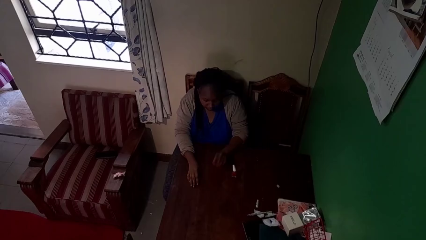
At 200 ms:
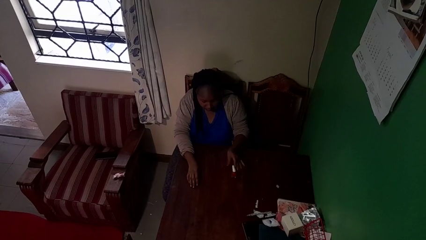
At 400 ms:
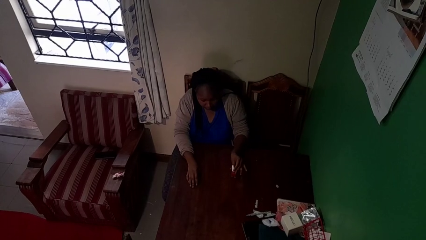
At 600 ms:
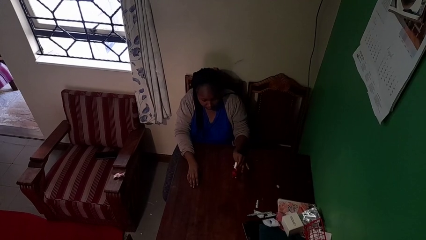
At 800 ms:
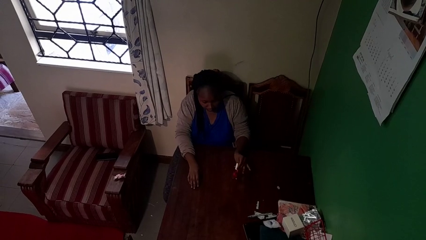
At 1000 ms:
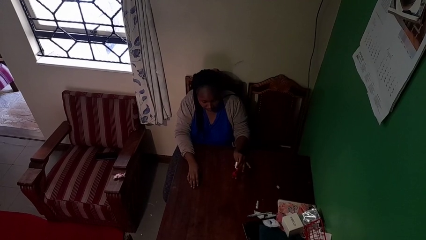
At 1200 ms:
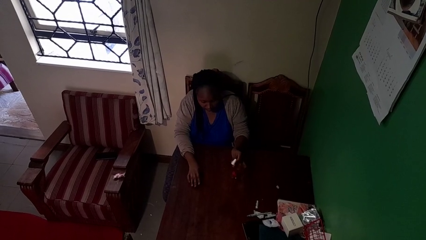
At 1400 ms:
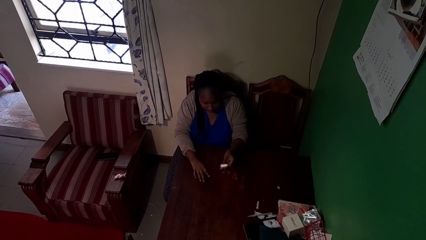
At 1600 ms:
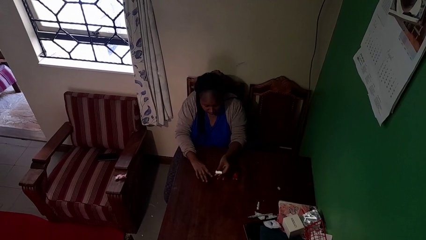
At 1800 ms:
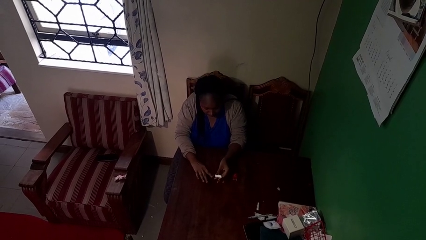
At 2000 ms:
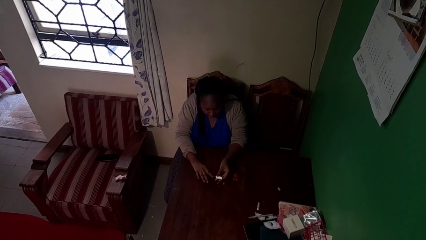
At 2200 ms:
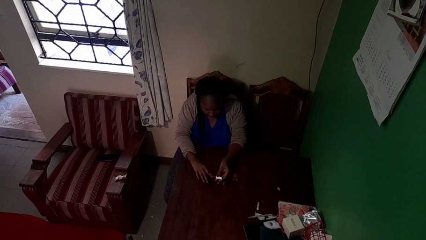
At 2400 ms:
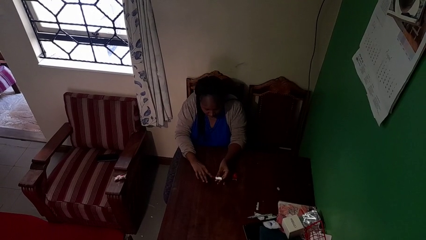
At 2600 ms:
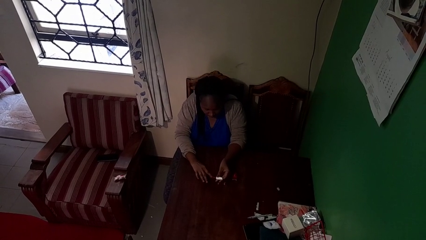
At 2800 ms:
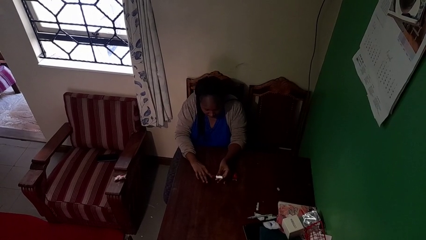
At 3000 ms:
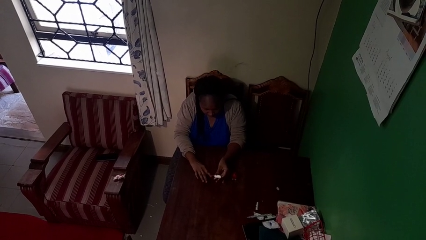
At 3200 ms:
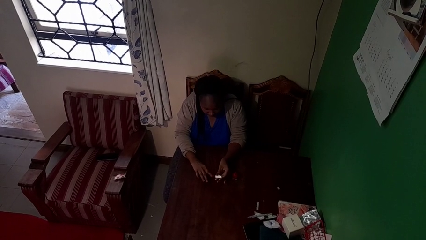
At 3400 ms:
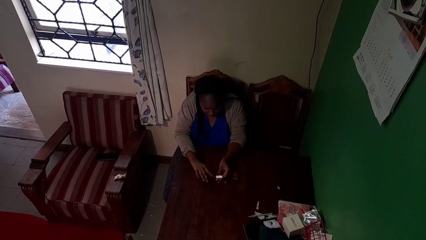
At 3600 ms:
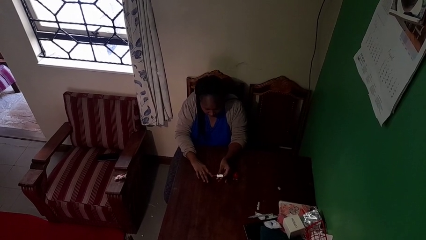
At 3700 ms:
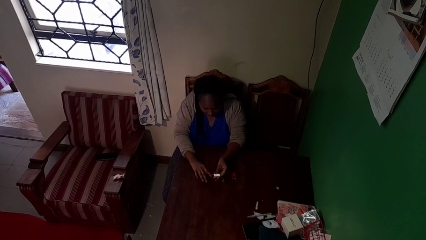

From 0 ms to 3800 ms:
person paints fingernails

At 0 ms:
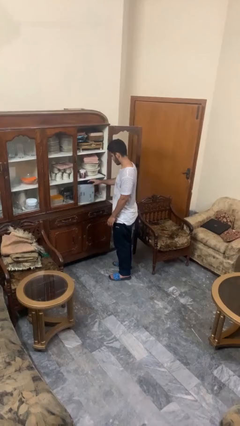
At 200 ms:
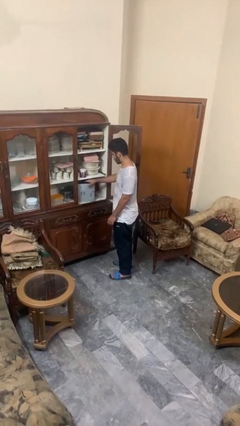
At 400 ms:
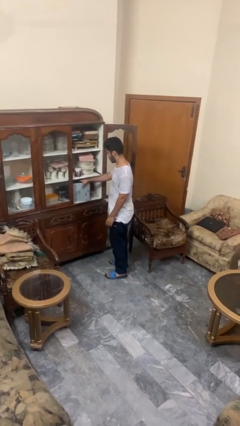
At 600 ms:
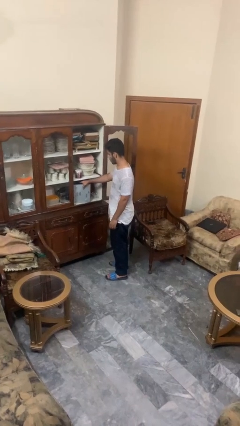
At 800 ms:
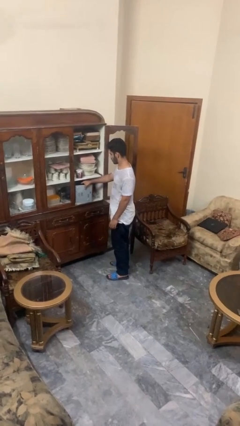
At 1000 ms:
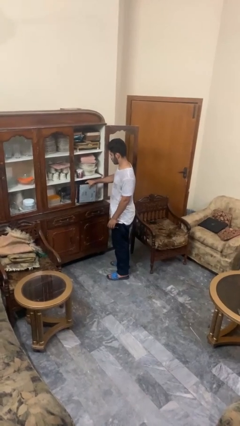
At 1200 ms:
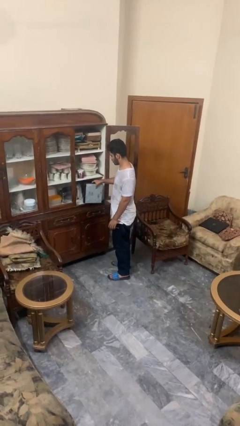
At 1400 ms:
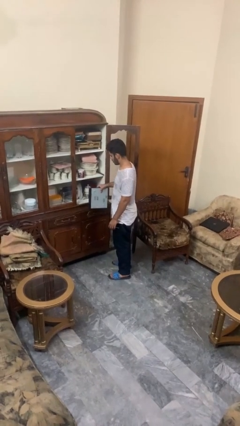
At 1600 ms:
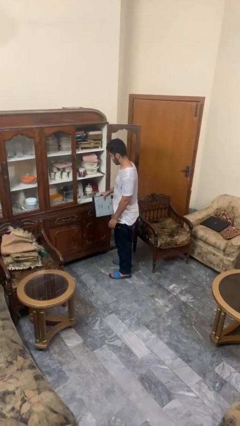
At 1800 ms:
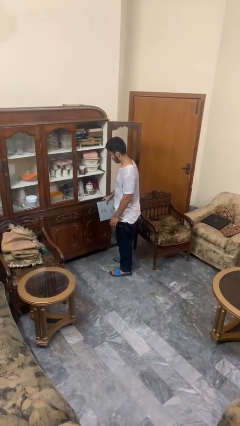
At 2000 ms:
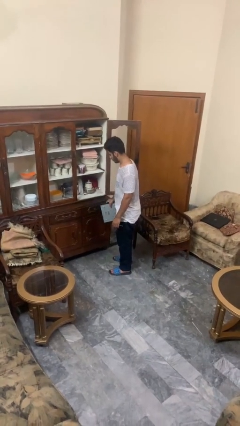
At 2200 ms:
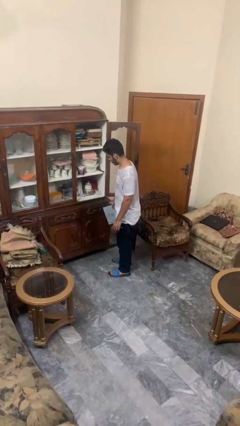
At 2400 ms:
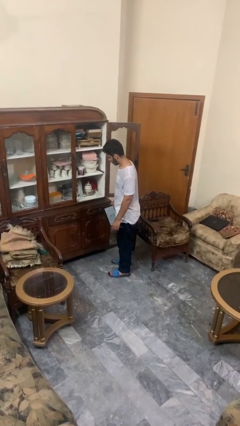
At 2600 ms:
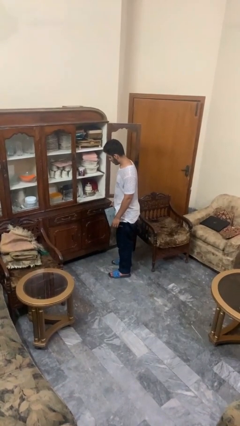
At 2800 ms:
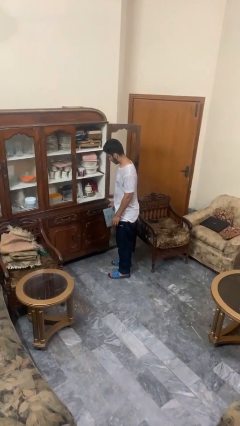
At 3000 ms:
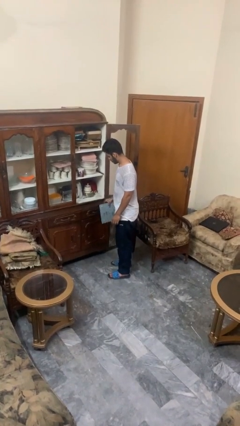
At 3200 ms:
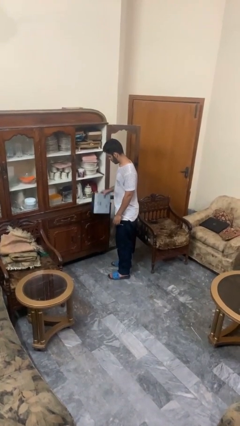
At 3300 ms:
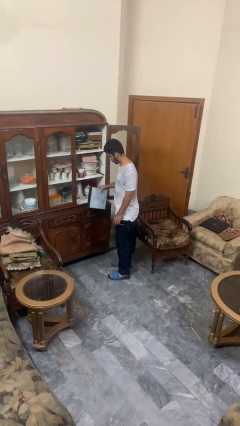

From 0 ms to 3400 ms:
person picks up object from cabinet

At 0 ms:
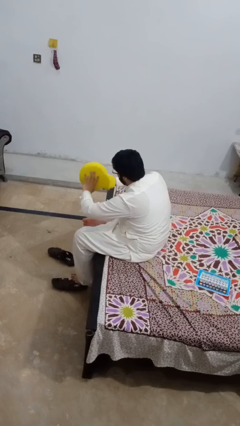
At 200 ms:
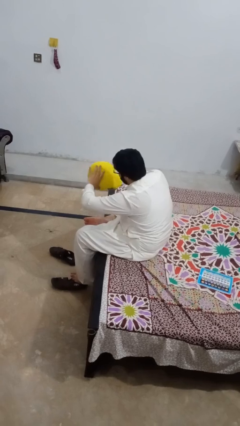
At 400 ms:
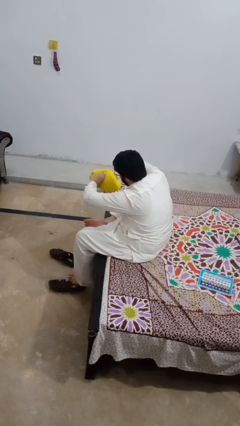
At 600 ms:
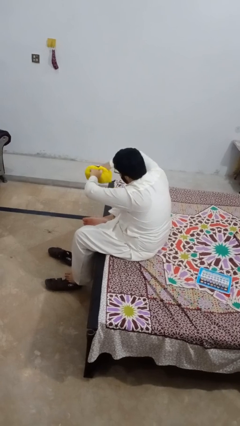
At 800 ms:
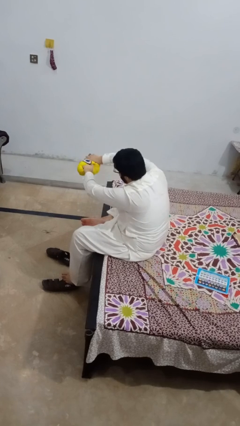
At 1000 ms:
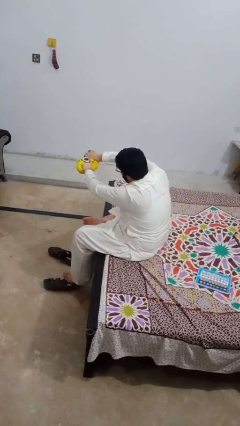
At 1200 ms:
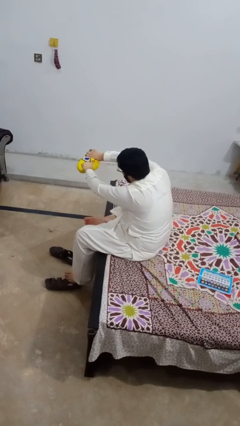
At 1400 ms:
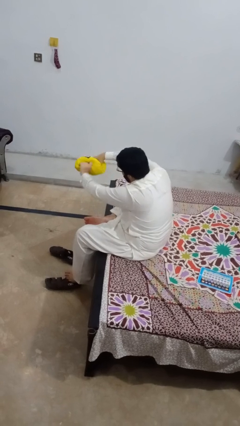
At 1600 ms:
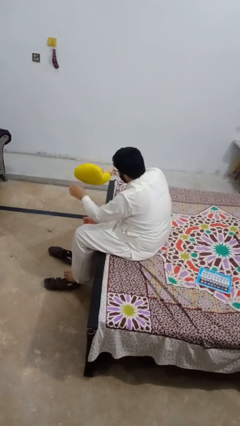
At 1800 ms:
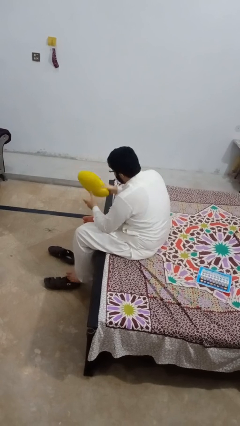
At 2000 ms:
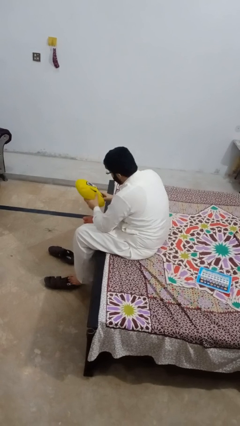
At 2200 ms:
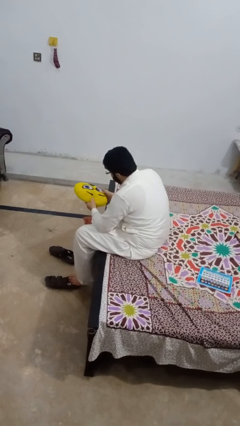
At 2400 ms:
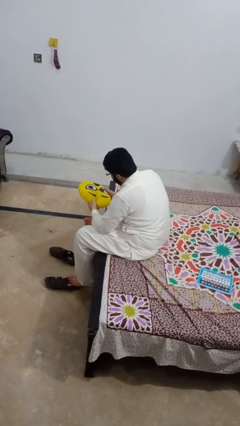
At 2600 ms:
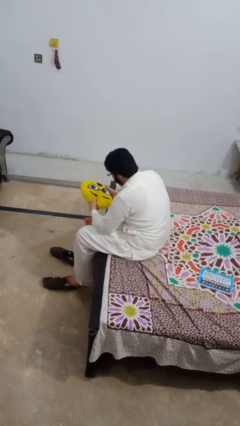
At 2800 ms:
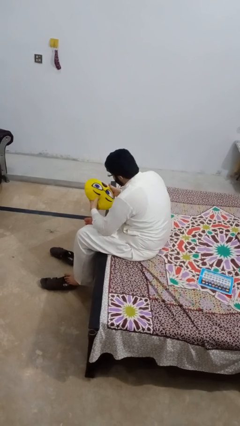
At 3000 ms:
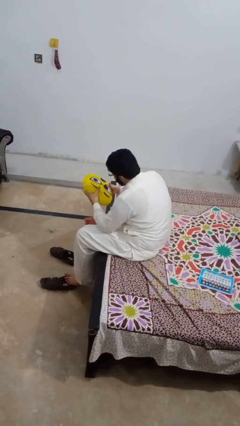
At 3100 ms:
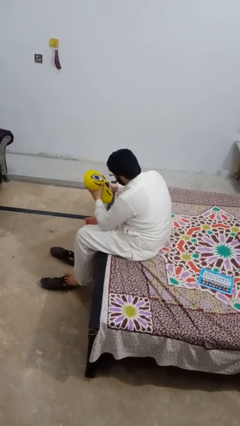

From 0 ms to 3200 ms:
person squeezes object

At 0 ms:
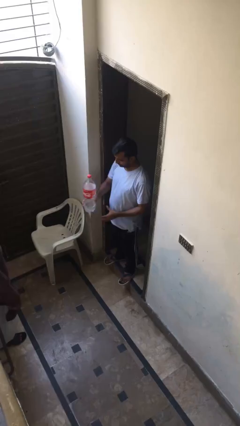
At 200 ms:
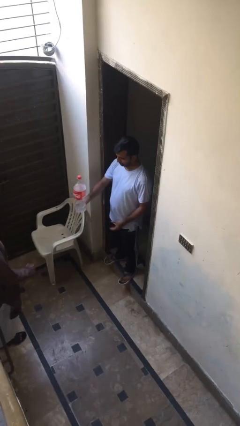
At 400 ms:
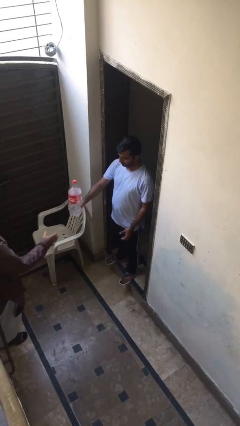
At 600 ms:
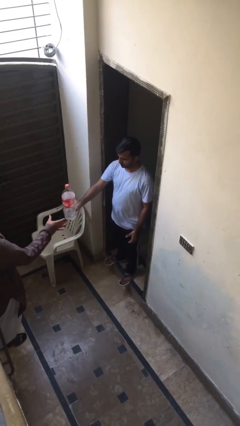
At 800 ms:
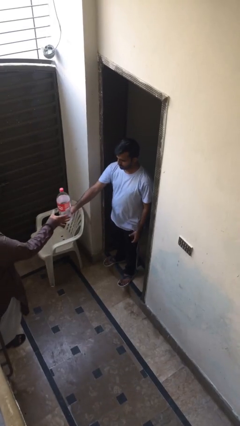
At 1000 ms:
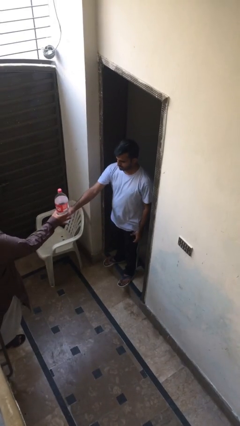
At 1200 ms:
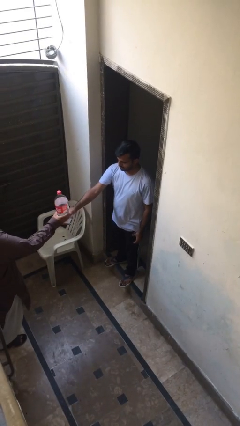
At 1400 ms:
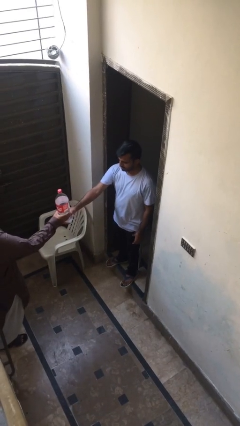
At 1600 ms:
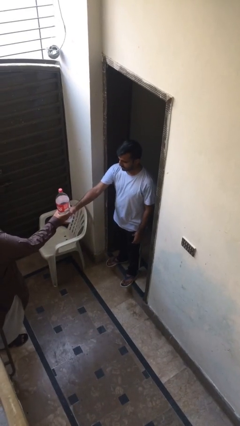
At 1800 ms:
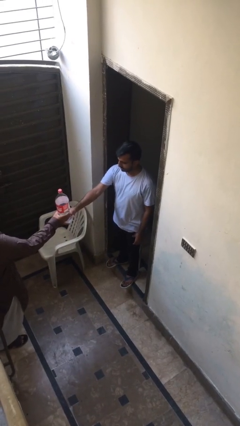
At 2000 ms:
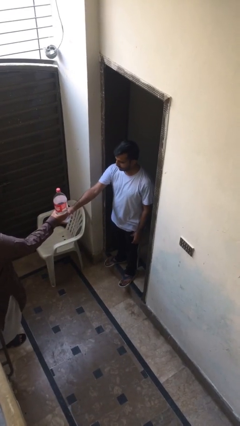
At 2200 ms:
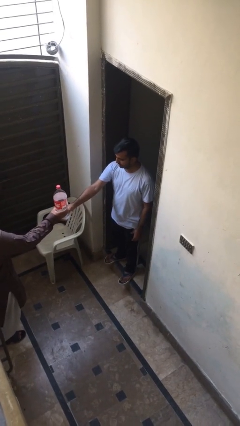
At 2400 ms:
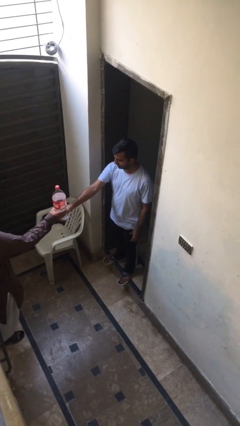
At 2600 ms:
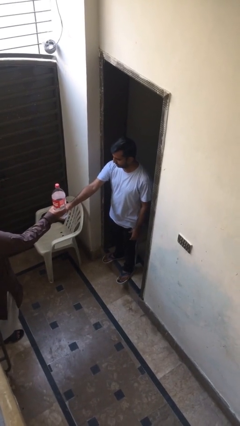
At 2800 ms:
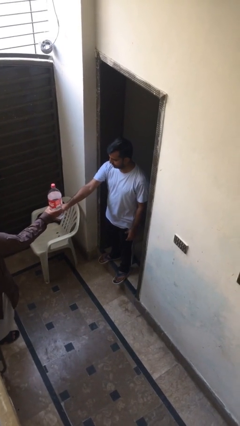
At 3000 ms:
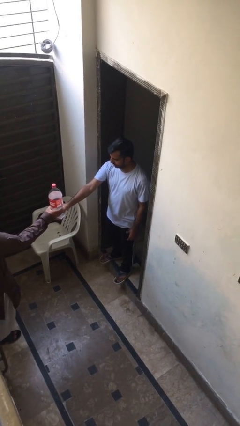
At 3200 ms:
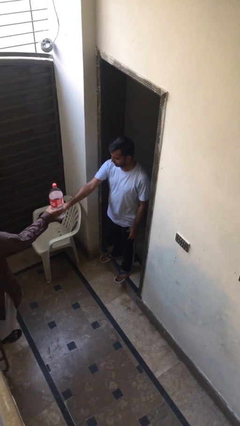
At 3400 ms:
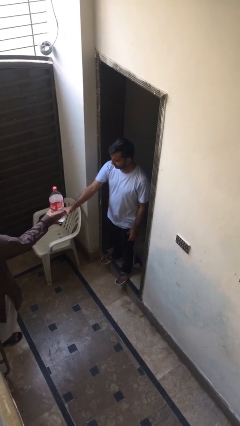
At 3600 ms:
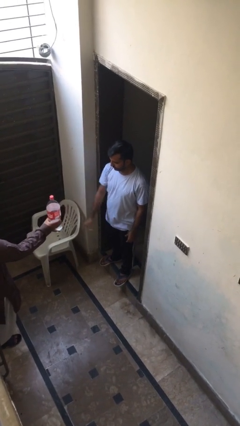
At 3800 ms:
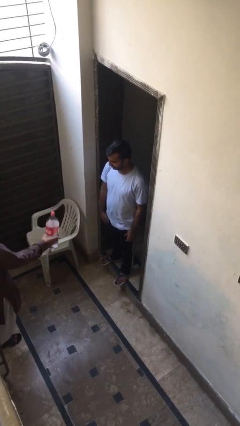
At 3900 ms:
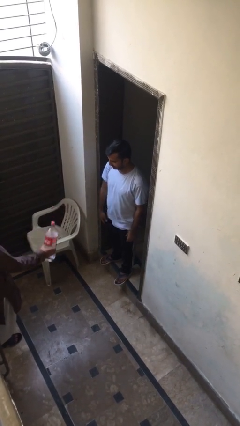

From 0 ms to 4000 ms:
person transfers object to person

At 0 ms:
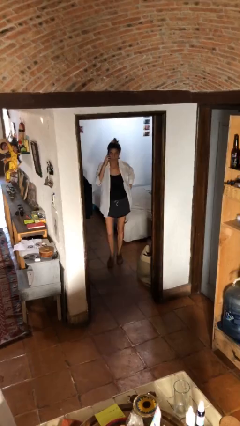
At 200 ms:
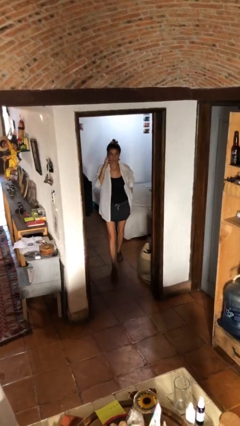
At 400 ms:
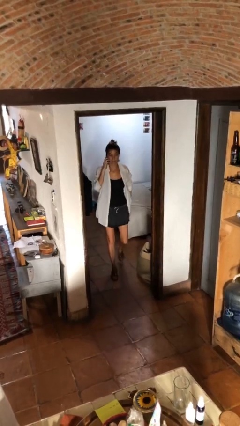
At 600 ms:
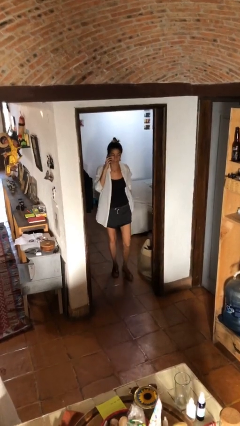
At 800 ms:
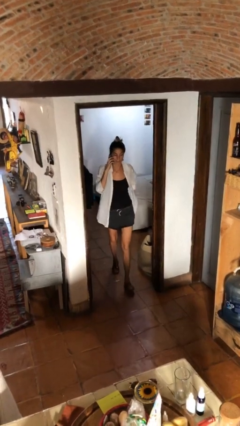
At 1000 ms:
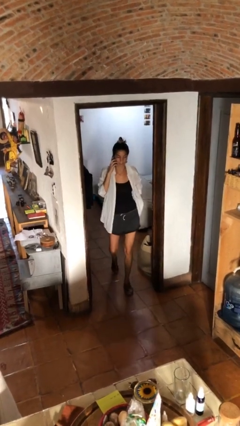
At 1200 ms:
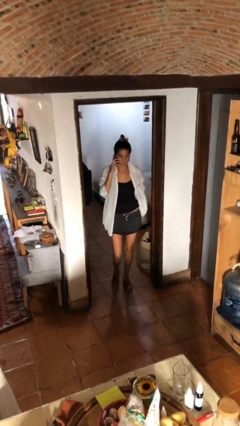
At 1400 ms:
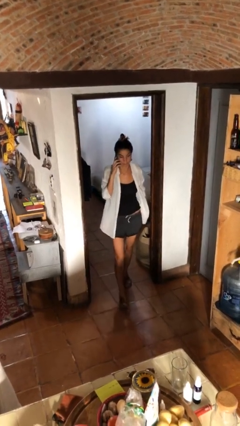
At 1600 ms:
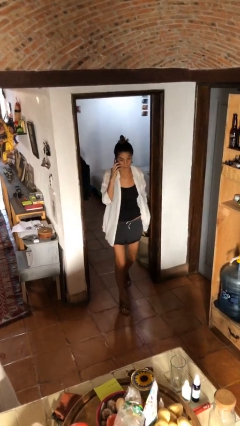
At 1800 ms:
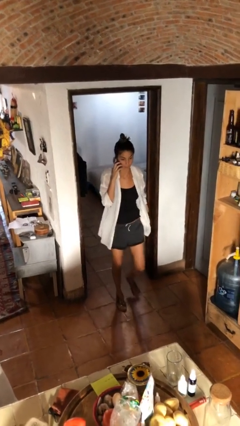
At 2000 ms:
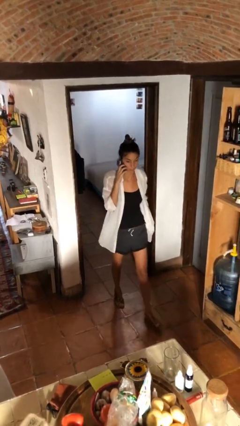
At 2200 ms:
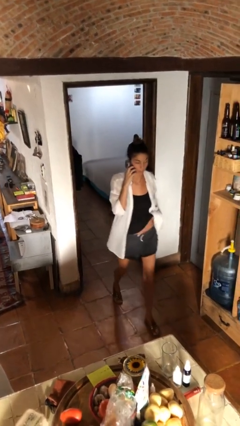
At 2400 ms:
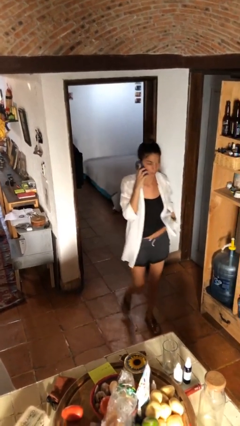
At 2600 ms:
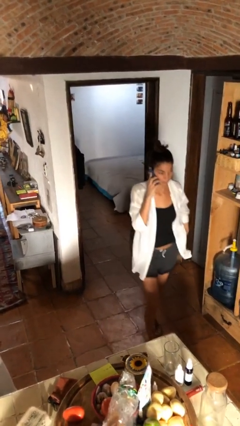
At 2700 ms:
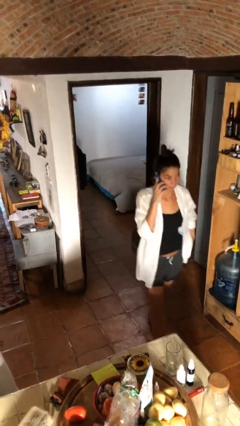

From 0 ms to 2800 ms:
person enters scene through structure
